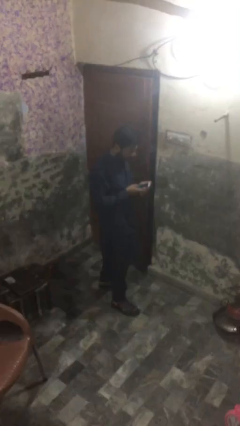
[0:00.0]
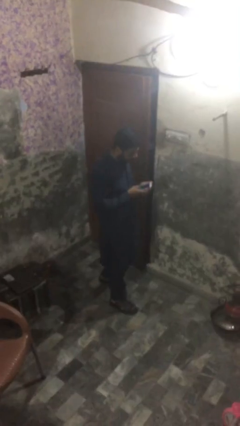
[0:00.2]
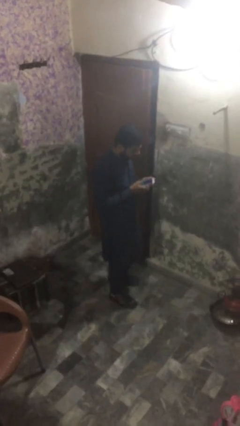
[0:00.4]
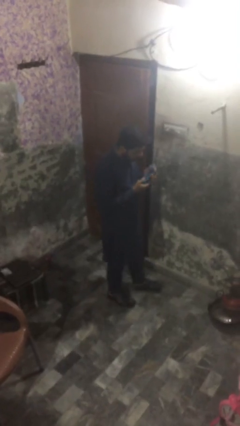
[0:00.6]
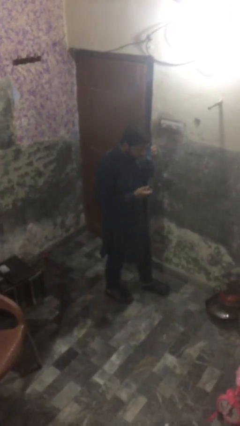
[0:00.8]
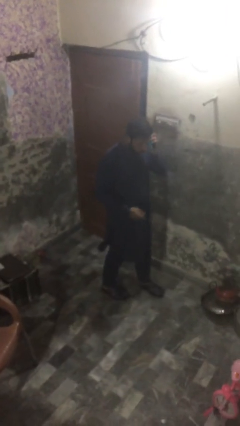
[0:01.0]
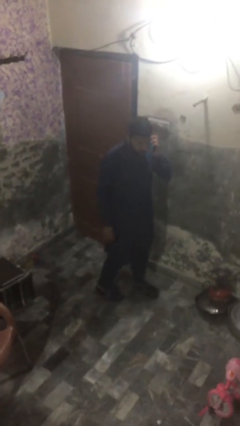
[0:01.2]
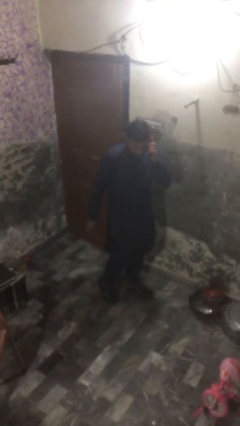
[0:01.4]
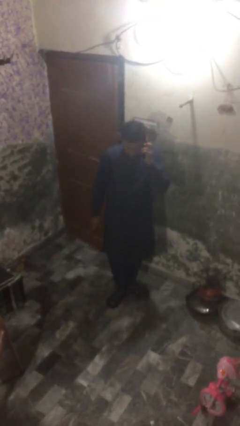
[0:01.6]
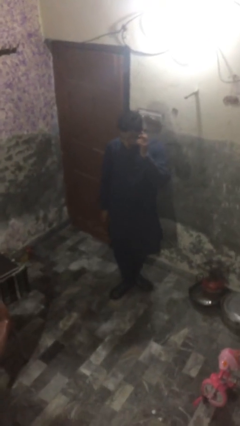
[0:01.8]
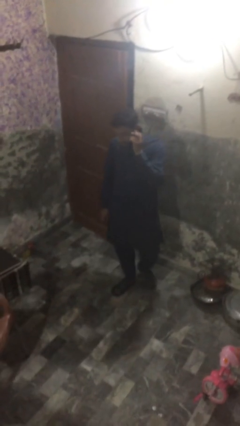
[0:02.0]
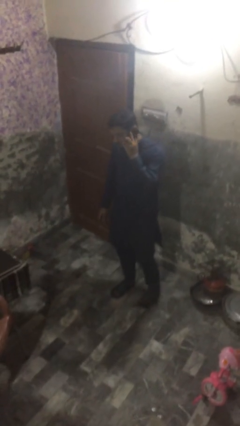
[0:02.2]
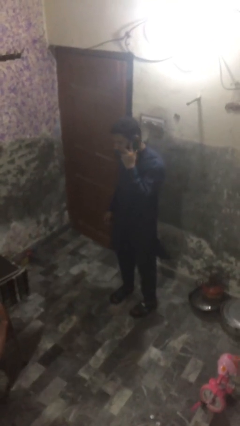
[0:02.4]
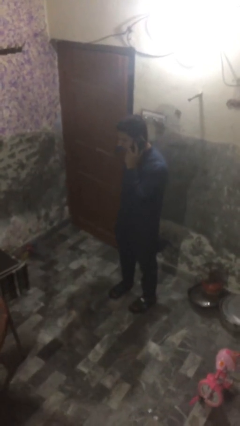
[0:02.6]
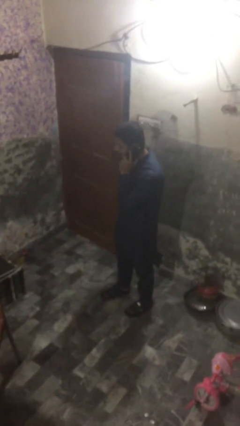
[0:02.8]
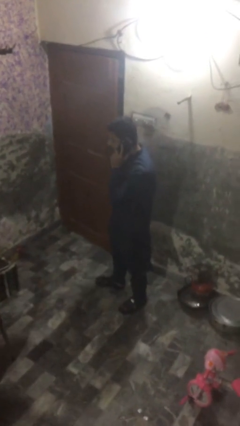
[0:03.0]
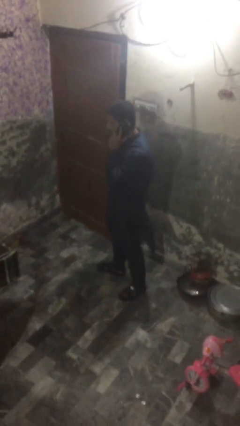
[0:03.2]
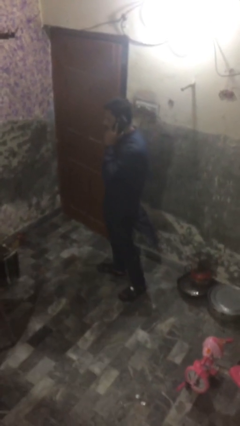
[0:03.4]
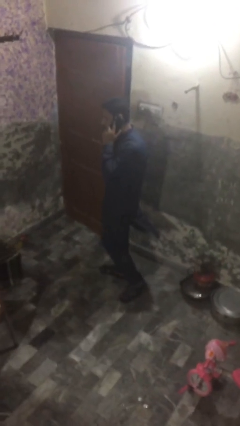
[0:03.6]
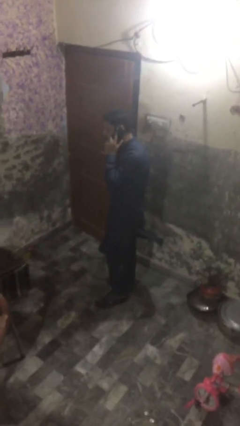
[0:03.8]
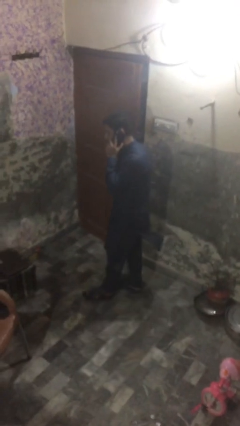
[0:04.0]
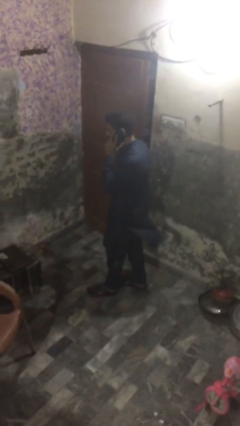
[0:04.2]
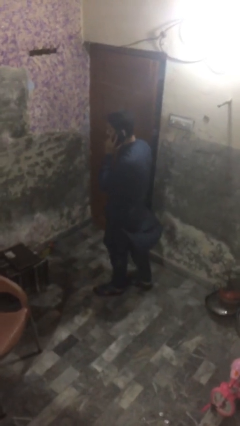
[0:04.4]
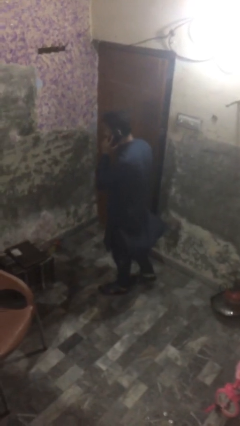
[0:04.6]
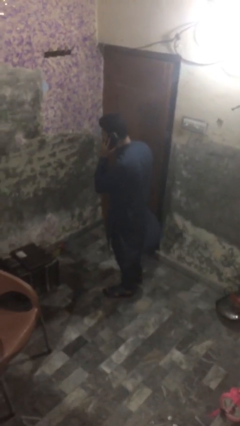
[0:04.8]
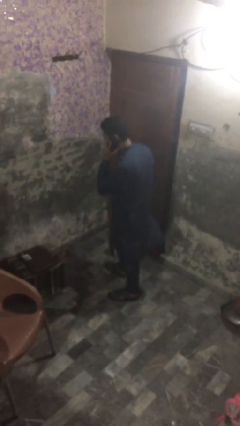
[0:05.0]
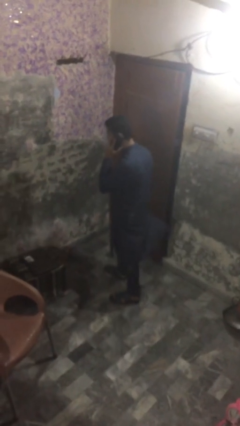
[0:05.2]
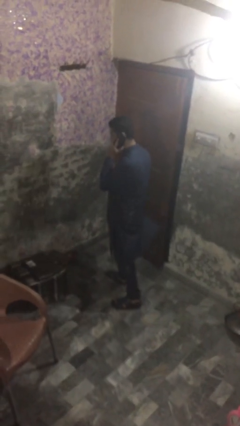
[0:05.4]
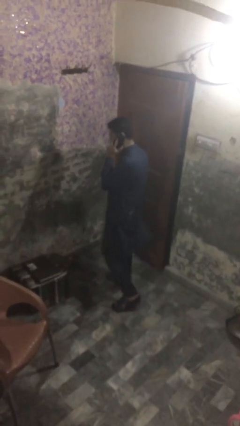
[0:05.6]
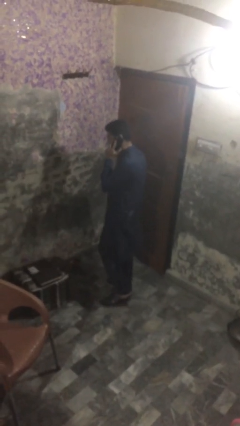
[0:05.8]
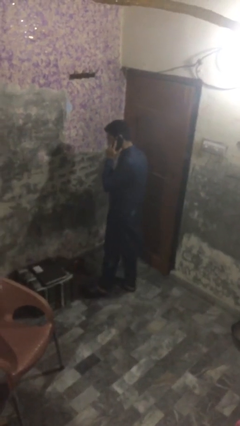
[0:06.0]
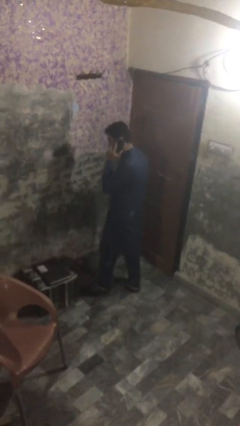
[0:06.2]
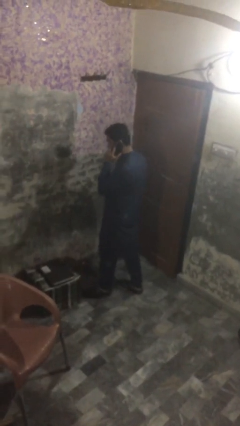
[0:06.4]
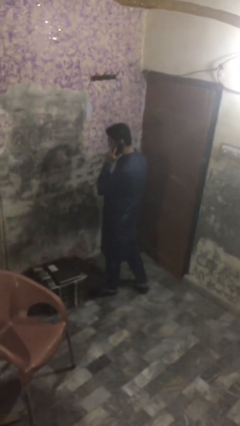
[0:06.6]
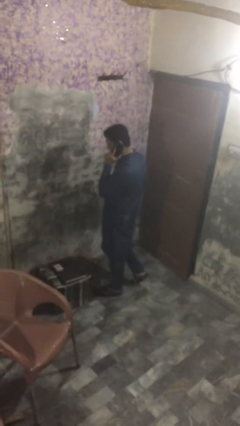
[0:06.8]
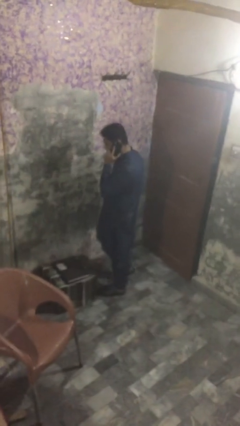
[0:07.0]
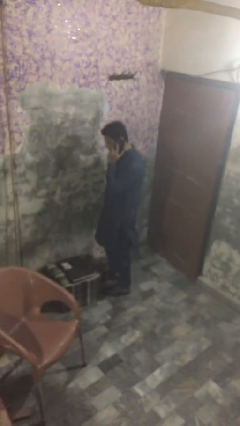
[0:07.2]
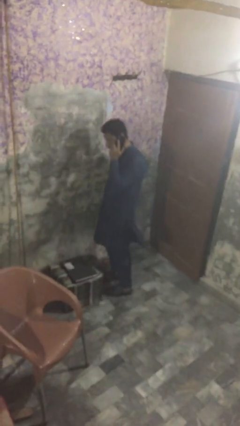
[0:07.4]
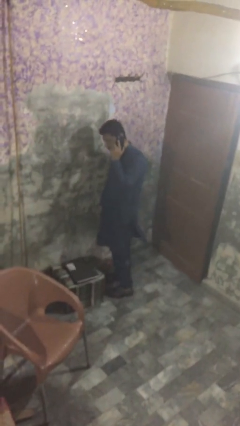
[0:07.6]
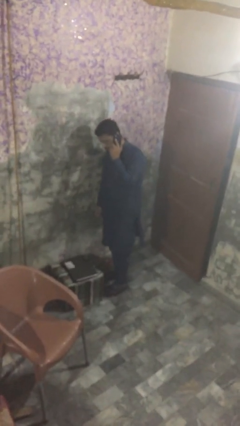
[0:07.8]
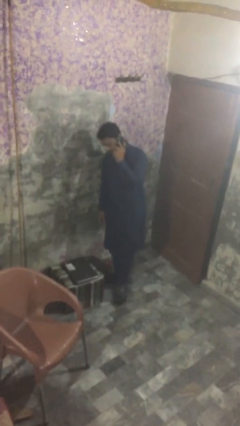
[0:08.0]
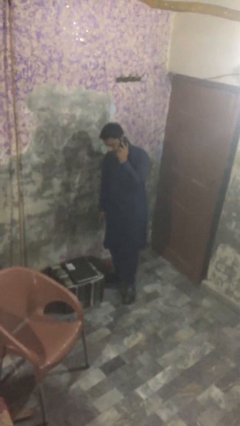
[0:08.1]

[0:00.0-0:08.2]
person talks on phone

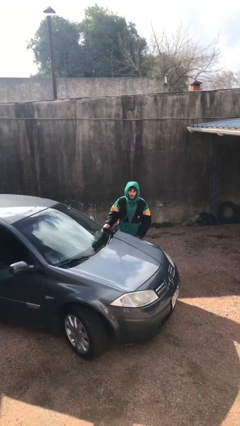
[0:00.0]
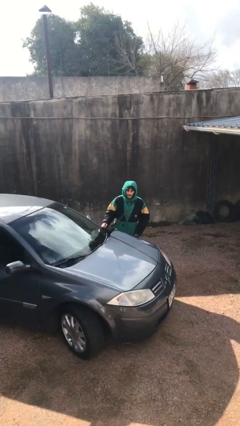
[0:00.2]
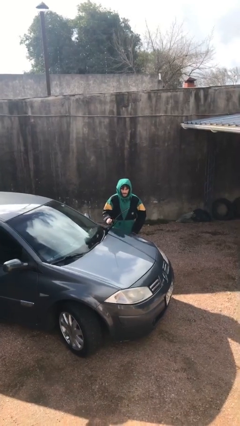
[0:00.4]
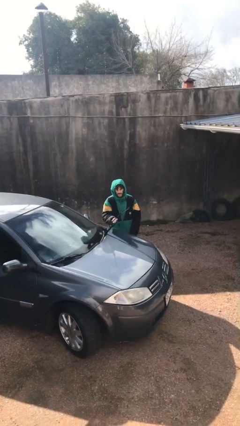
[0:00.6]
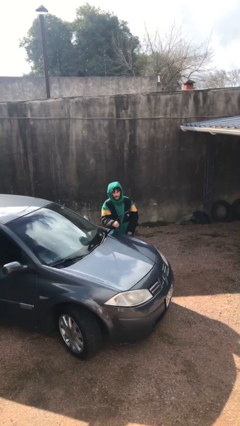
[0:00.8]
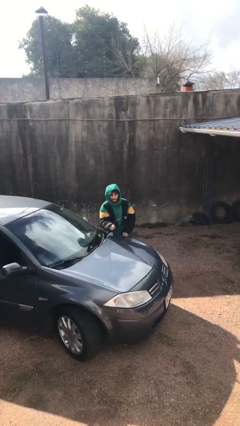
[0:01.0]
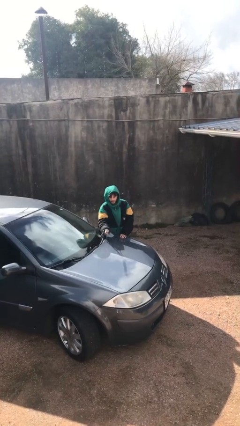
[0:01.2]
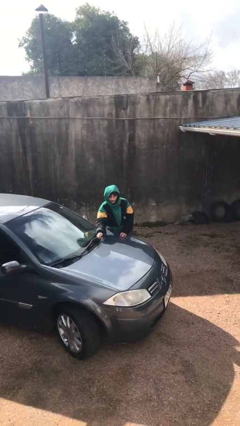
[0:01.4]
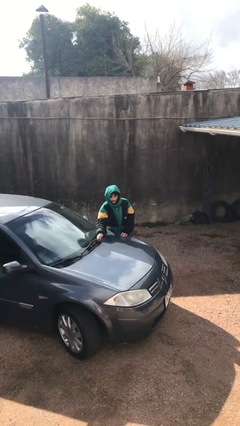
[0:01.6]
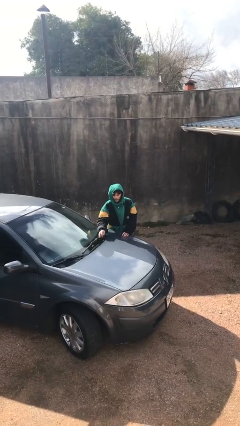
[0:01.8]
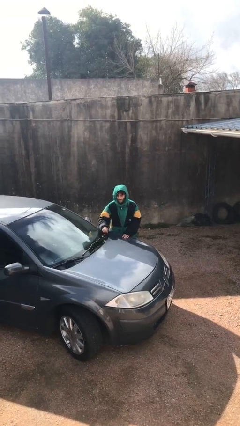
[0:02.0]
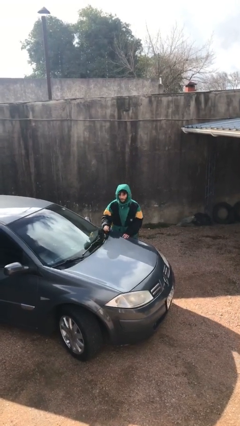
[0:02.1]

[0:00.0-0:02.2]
person flips down car wipers

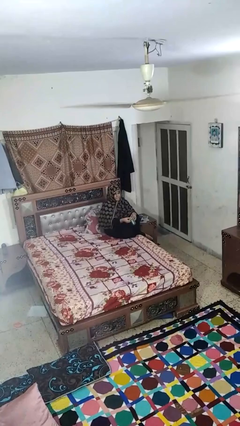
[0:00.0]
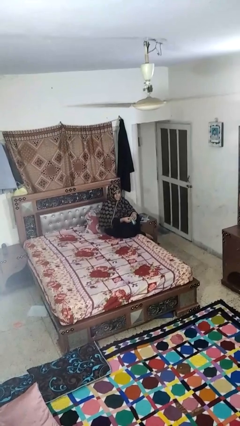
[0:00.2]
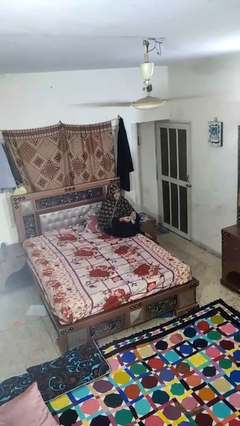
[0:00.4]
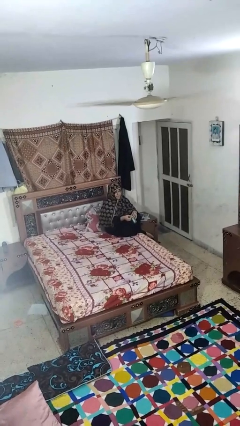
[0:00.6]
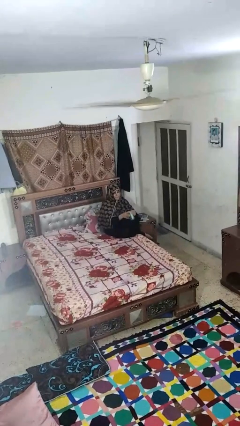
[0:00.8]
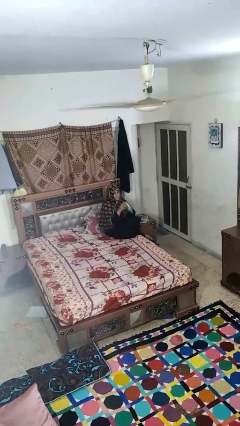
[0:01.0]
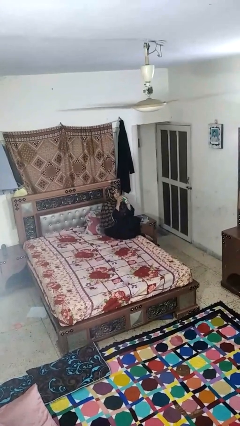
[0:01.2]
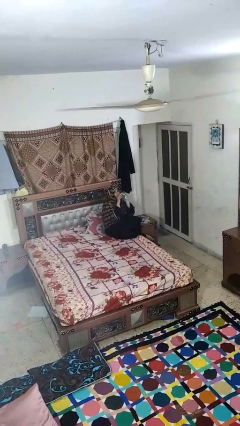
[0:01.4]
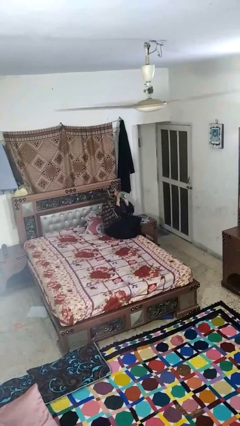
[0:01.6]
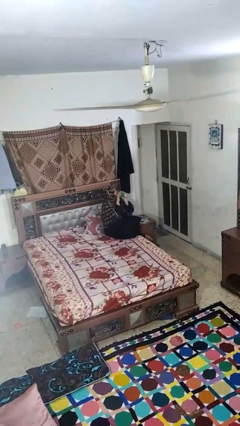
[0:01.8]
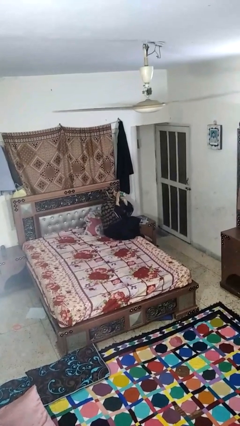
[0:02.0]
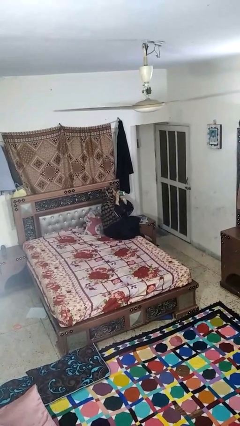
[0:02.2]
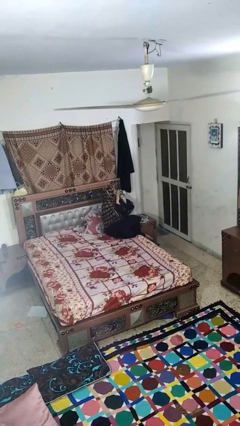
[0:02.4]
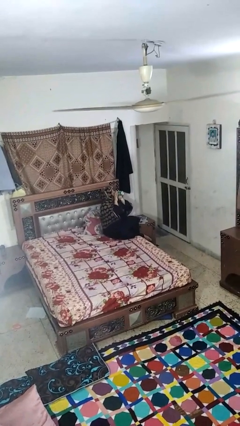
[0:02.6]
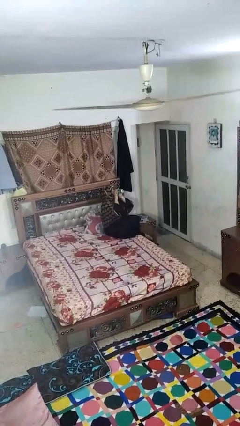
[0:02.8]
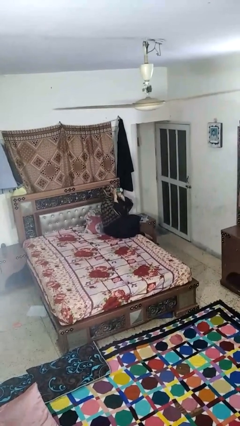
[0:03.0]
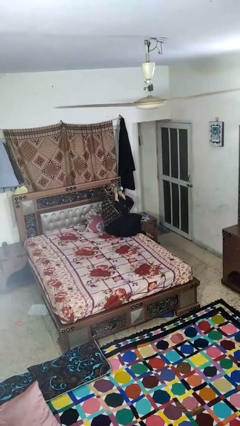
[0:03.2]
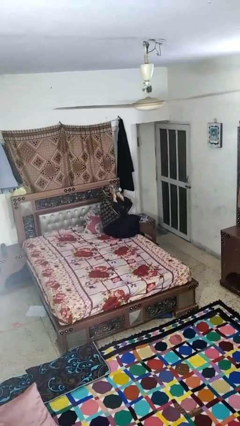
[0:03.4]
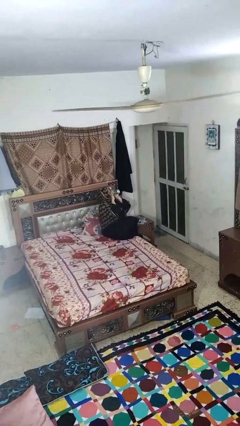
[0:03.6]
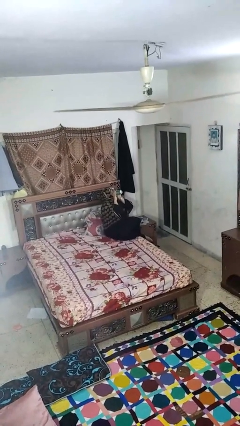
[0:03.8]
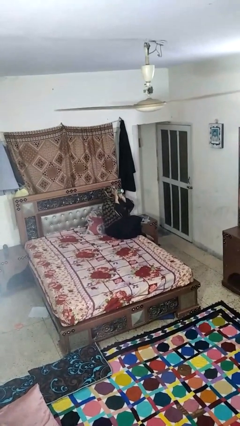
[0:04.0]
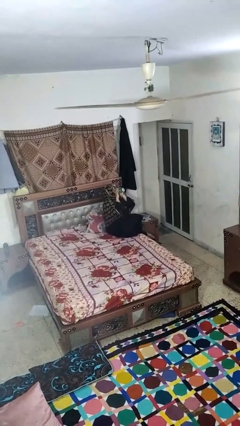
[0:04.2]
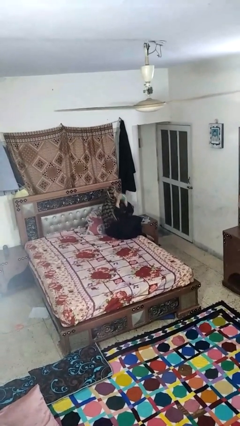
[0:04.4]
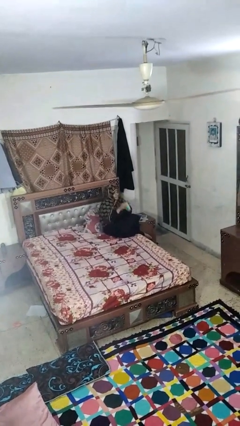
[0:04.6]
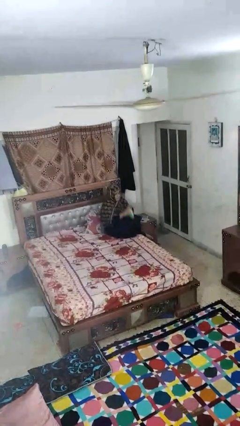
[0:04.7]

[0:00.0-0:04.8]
person drinks from beverage can

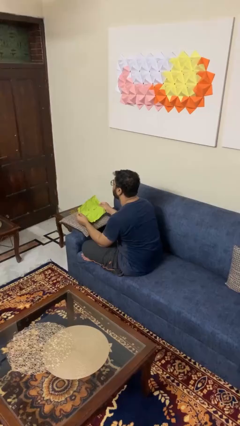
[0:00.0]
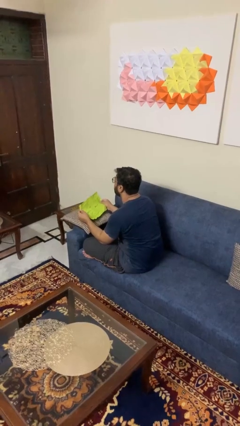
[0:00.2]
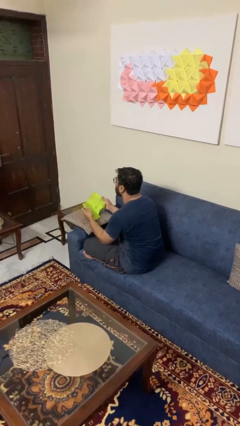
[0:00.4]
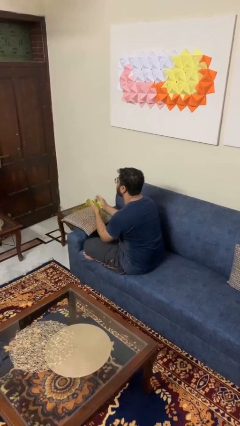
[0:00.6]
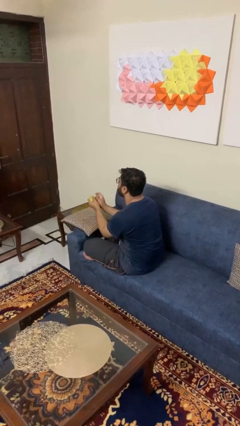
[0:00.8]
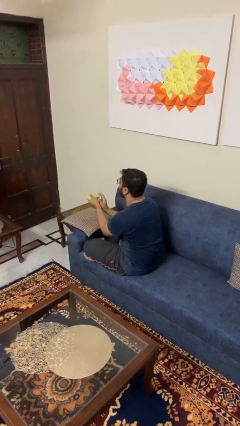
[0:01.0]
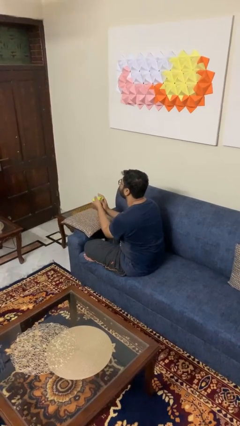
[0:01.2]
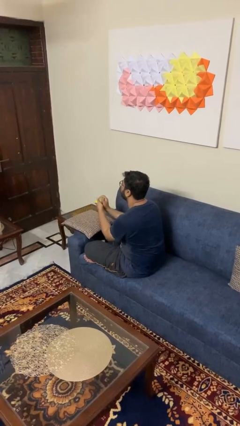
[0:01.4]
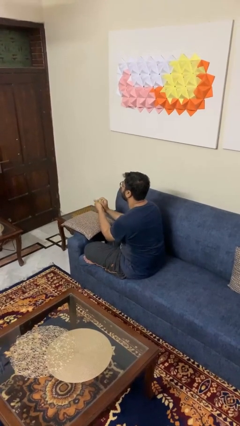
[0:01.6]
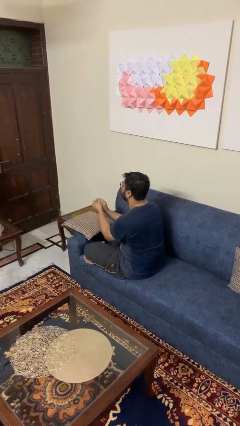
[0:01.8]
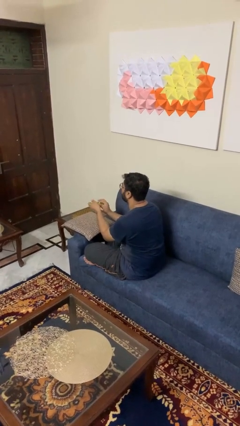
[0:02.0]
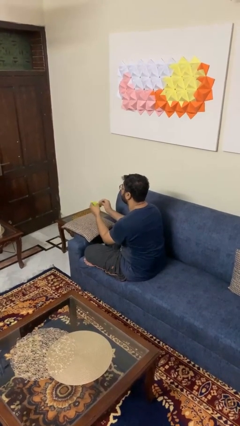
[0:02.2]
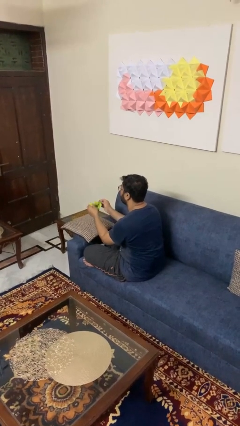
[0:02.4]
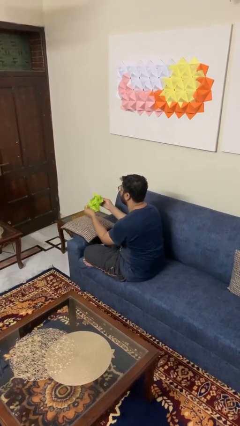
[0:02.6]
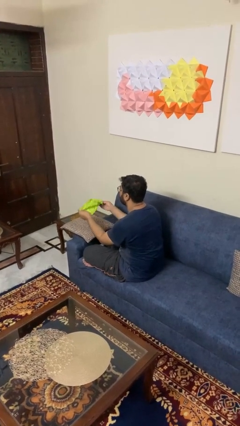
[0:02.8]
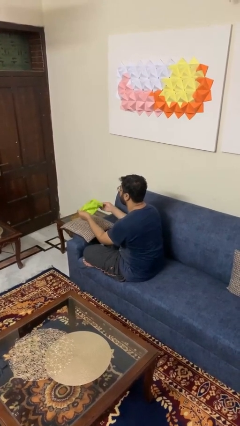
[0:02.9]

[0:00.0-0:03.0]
person crumples paper
